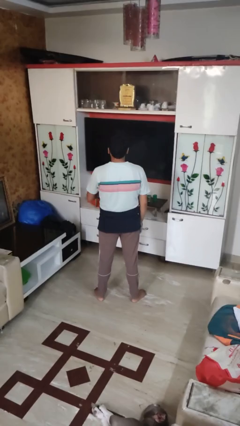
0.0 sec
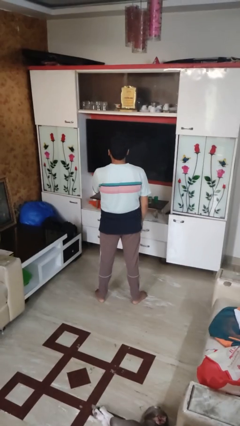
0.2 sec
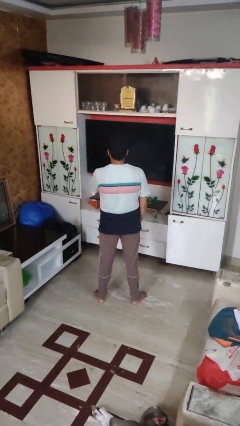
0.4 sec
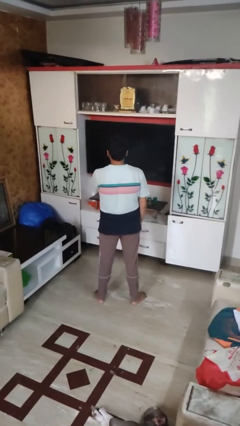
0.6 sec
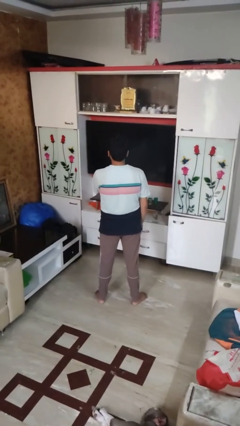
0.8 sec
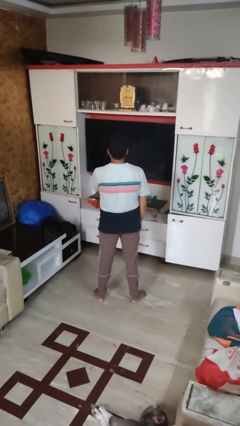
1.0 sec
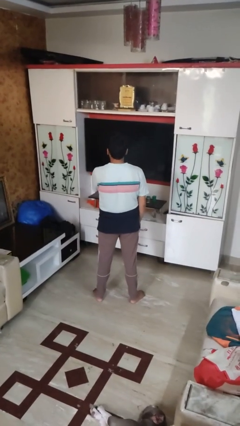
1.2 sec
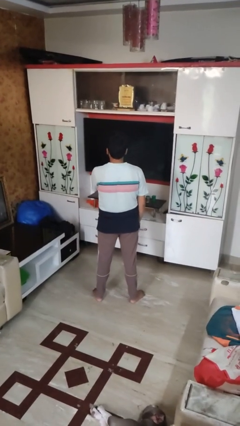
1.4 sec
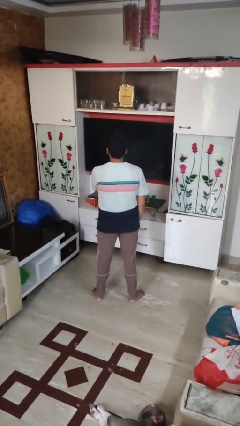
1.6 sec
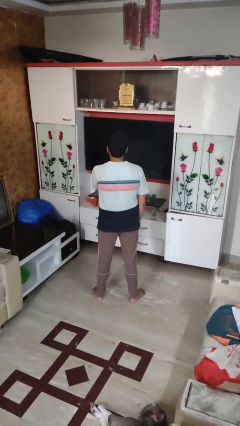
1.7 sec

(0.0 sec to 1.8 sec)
person gestures be quiet

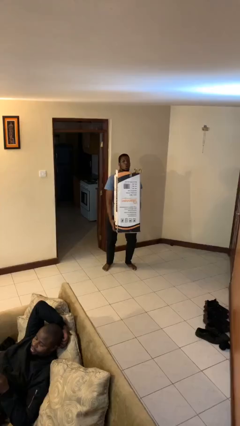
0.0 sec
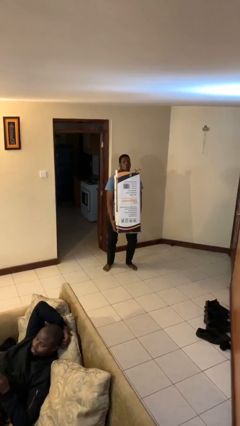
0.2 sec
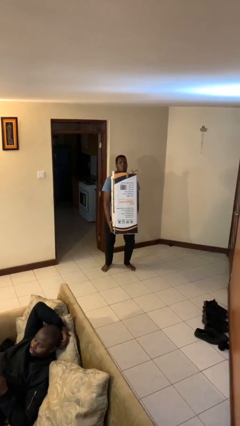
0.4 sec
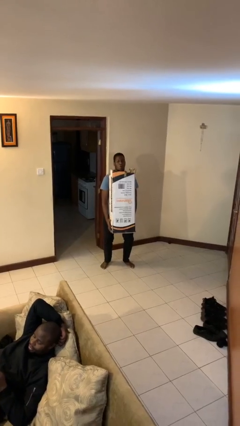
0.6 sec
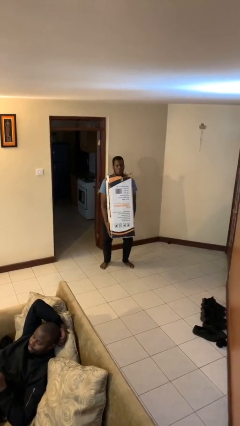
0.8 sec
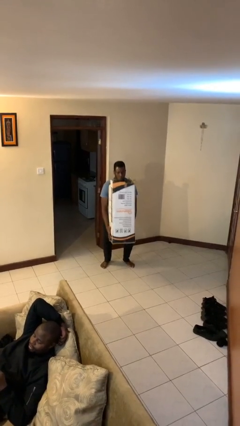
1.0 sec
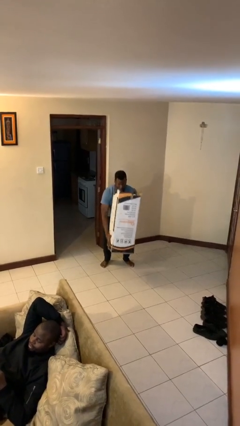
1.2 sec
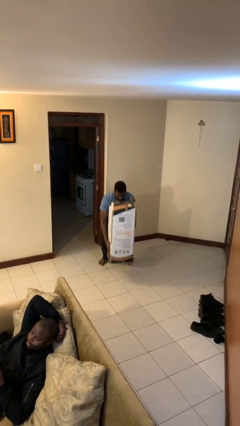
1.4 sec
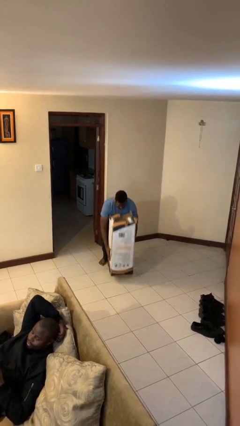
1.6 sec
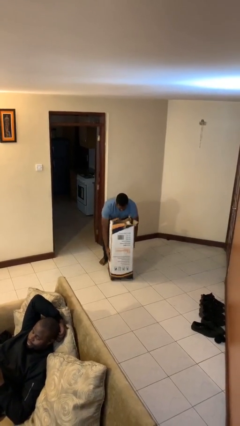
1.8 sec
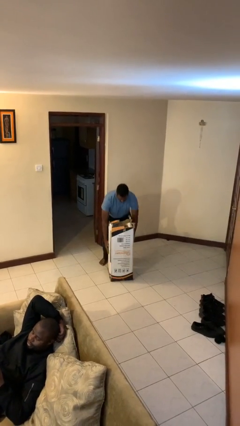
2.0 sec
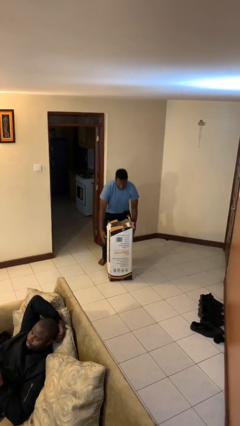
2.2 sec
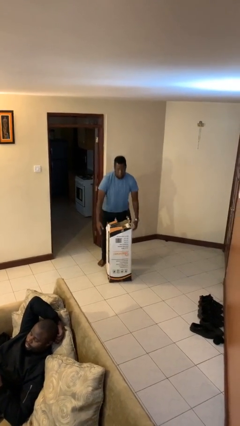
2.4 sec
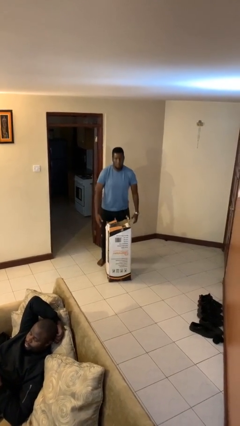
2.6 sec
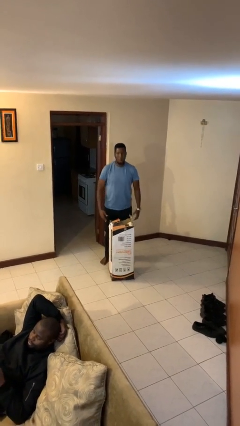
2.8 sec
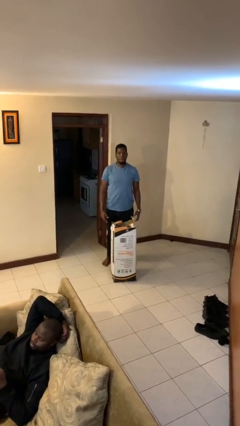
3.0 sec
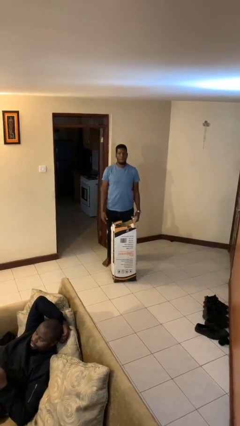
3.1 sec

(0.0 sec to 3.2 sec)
person puts down object on floor

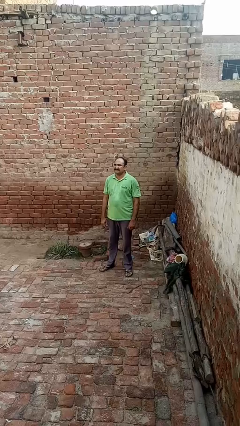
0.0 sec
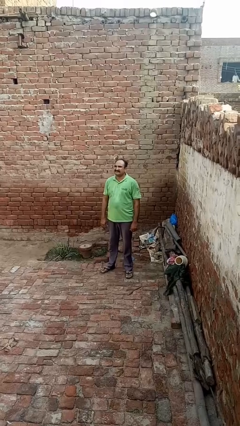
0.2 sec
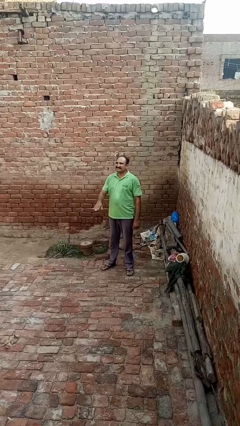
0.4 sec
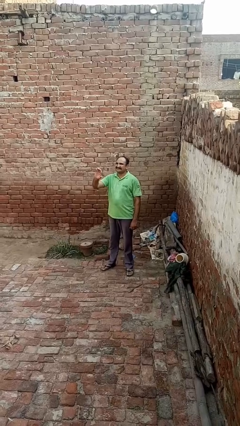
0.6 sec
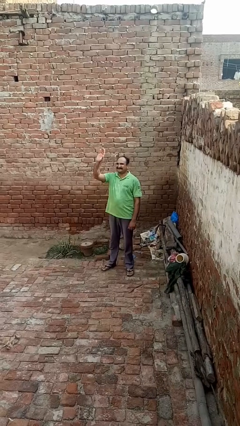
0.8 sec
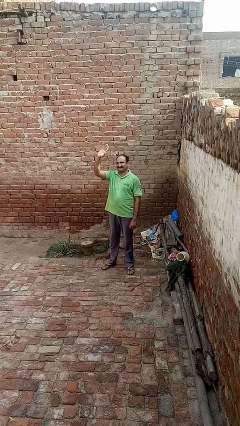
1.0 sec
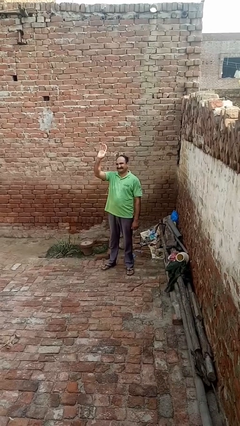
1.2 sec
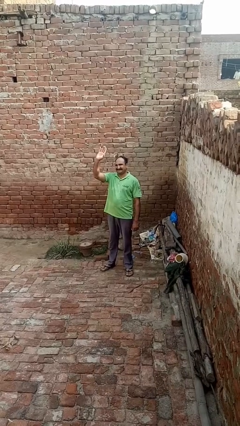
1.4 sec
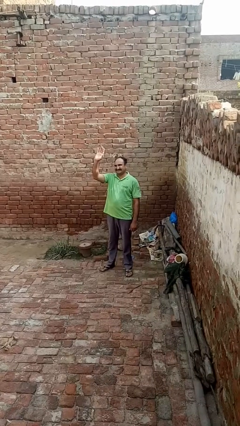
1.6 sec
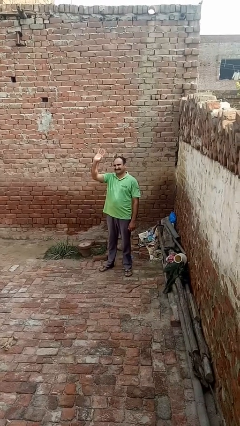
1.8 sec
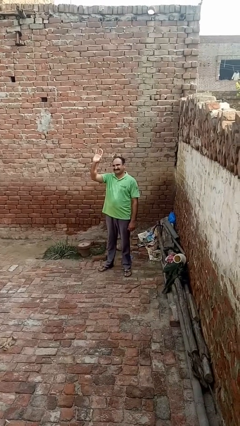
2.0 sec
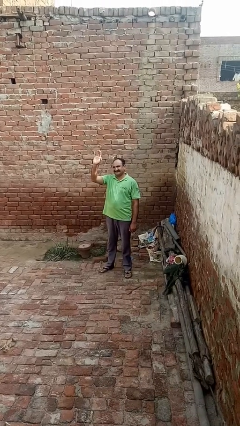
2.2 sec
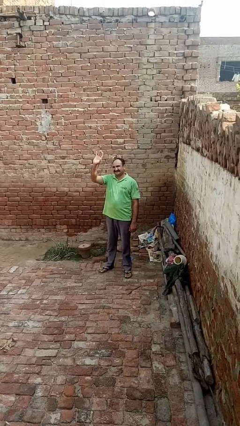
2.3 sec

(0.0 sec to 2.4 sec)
person waves at person

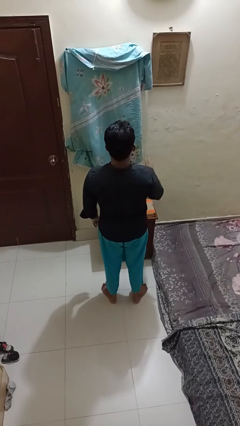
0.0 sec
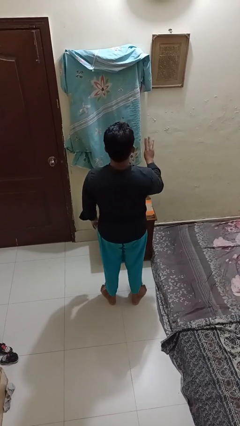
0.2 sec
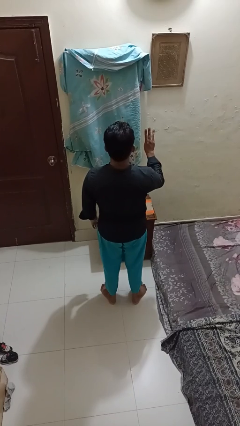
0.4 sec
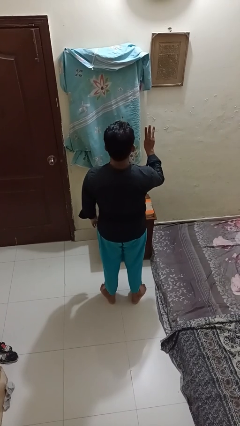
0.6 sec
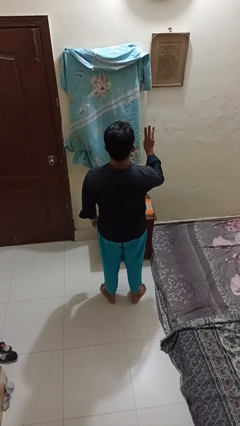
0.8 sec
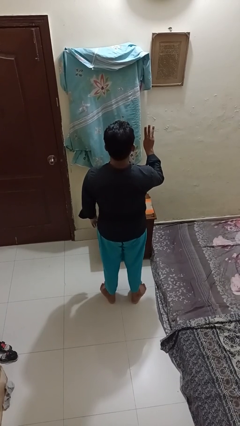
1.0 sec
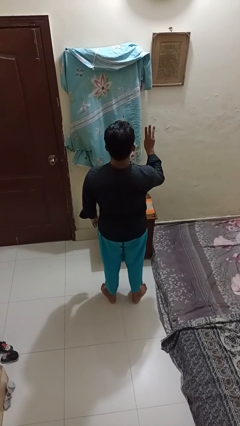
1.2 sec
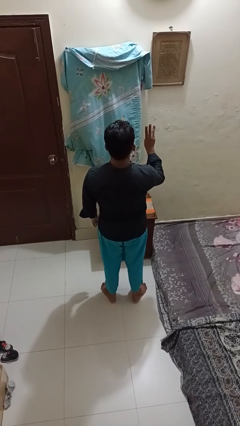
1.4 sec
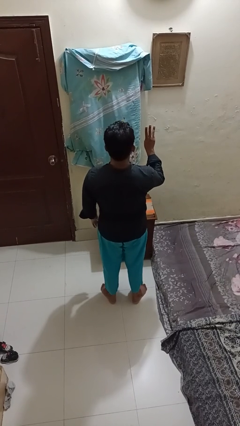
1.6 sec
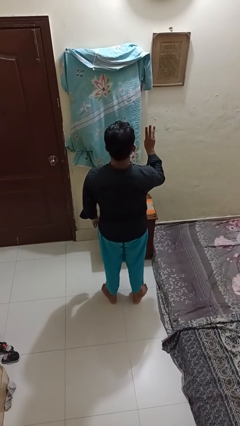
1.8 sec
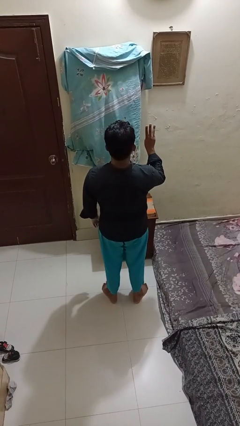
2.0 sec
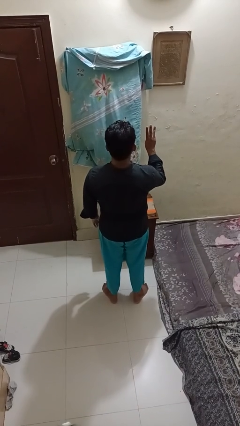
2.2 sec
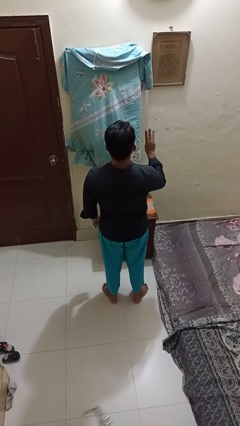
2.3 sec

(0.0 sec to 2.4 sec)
person gestures number three

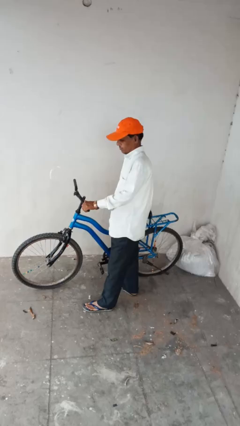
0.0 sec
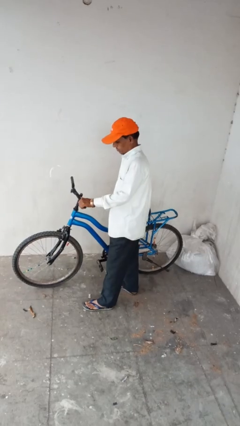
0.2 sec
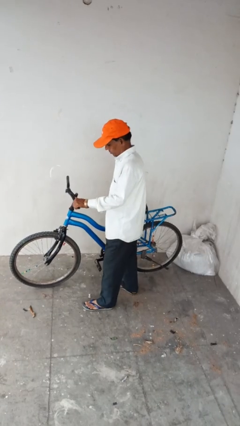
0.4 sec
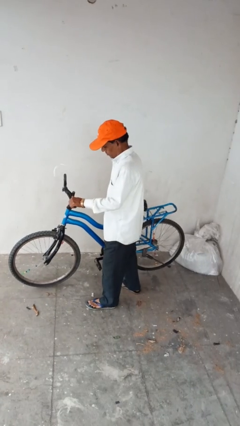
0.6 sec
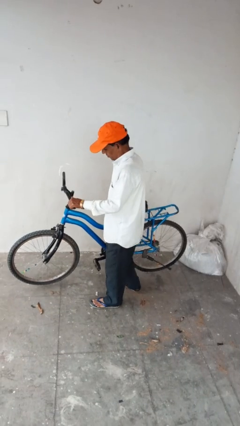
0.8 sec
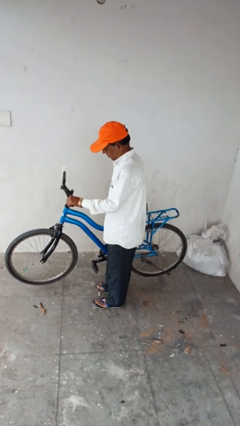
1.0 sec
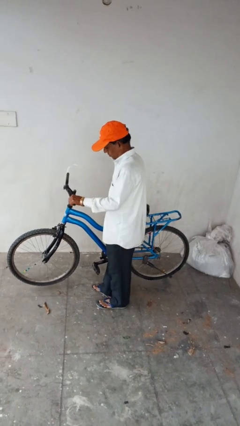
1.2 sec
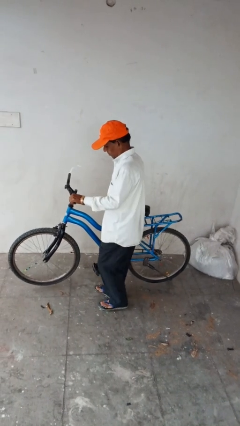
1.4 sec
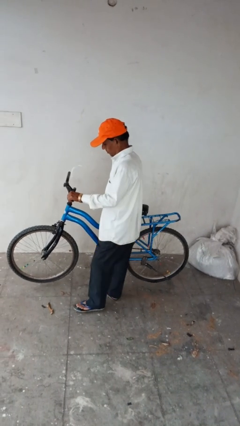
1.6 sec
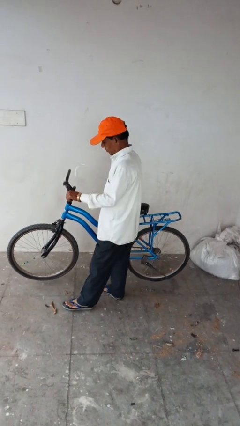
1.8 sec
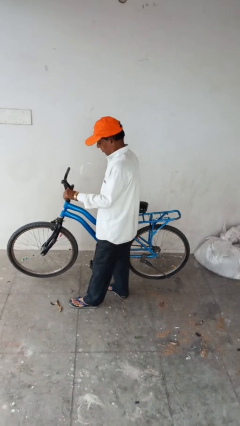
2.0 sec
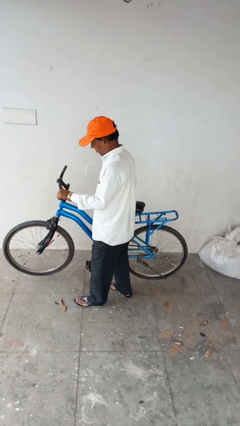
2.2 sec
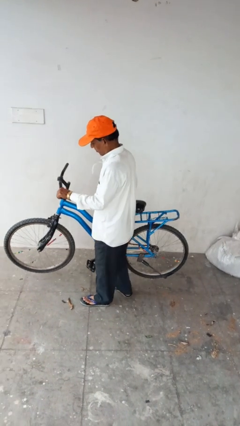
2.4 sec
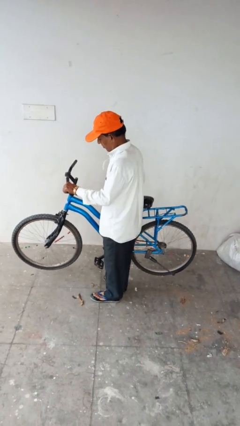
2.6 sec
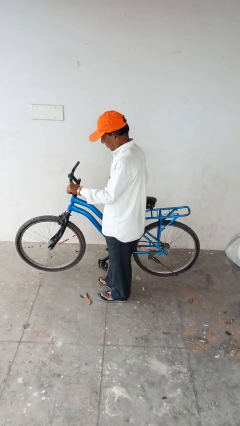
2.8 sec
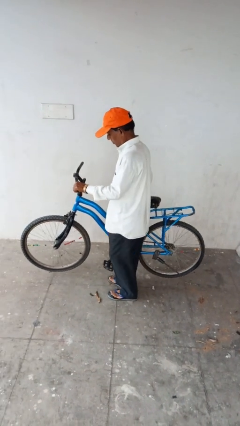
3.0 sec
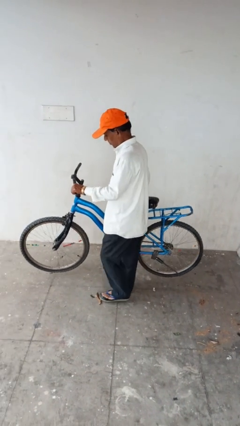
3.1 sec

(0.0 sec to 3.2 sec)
person carries bicycle

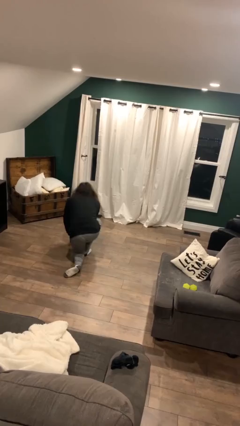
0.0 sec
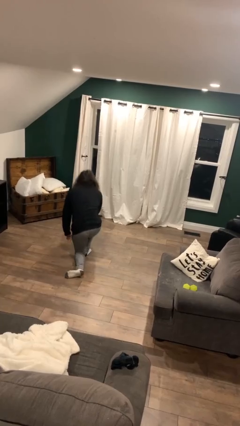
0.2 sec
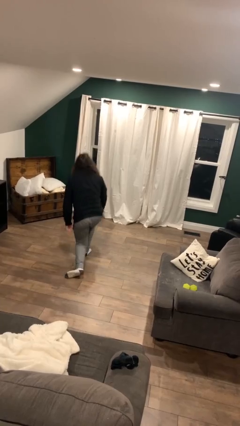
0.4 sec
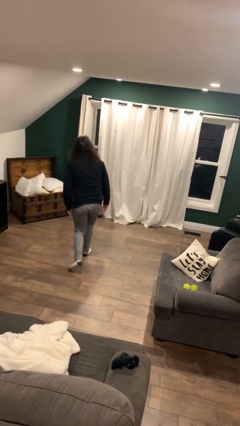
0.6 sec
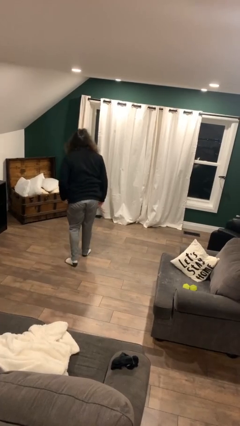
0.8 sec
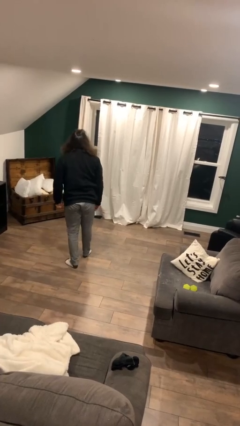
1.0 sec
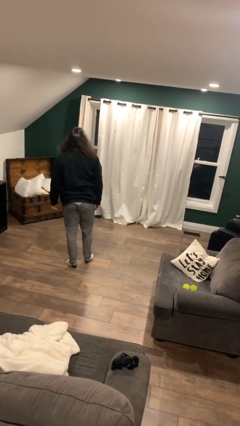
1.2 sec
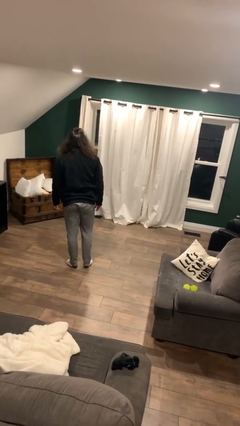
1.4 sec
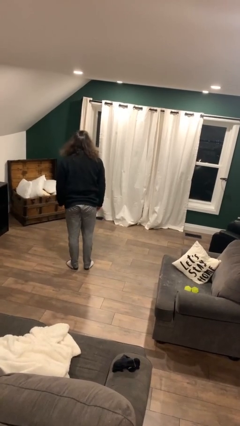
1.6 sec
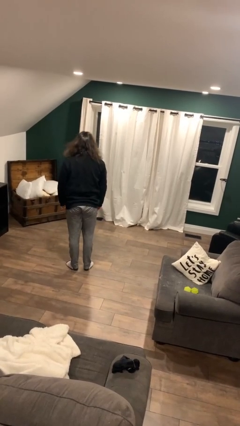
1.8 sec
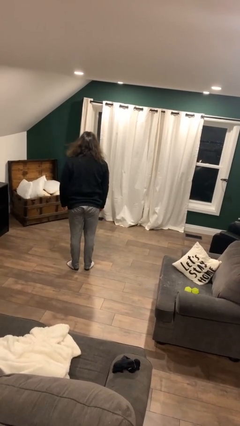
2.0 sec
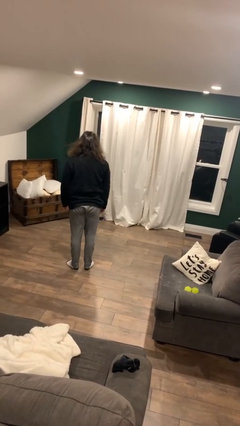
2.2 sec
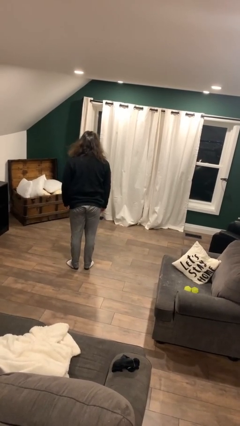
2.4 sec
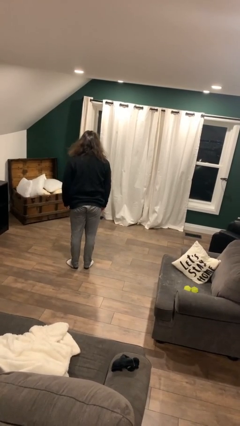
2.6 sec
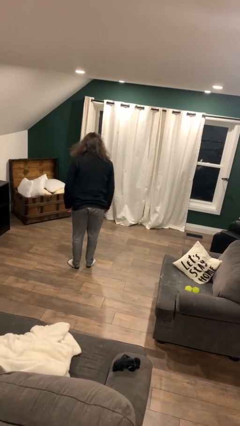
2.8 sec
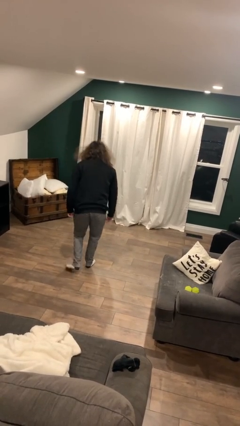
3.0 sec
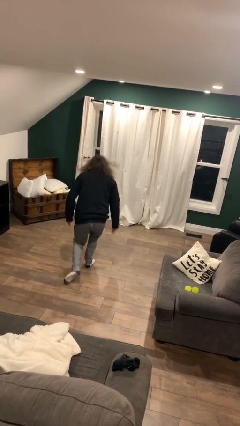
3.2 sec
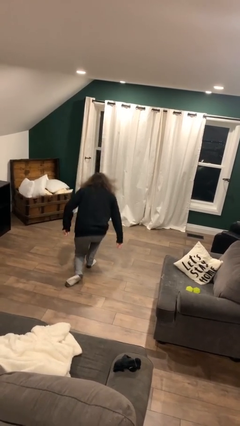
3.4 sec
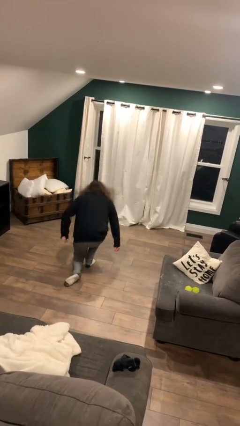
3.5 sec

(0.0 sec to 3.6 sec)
person stands up from floor

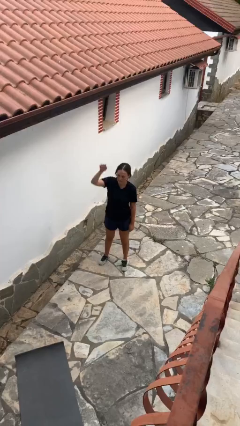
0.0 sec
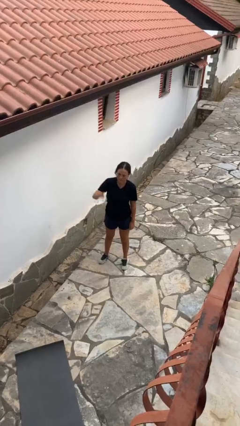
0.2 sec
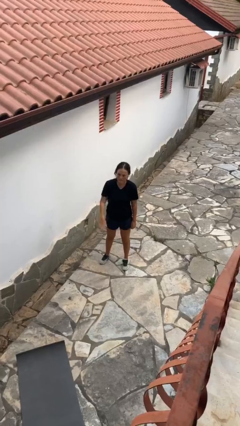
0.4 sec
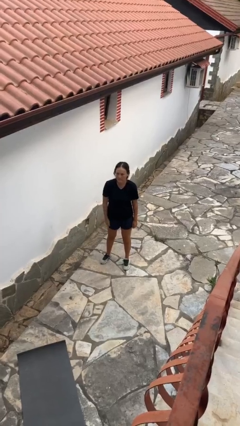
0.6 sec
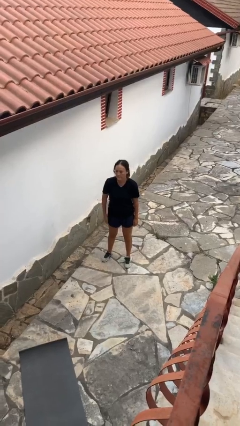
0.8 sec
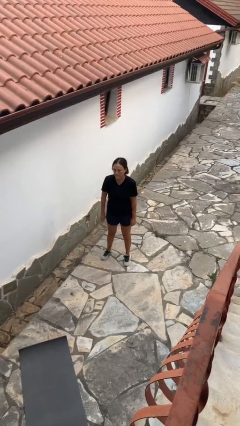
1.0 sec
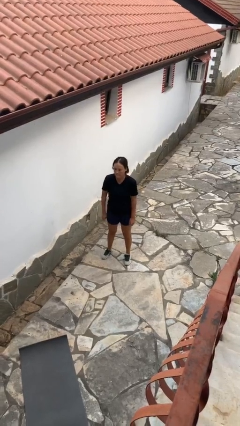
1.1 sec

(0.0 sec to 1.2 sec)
person gestures swipe down
